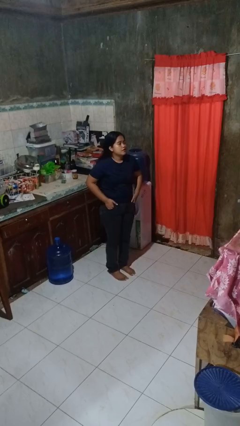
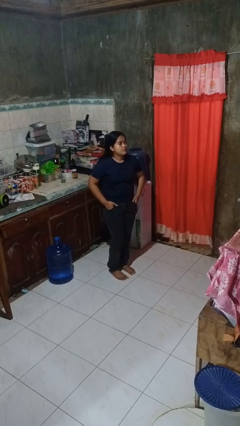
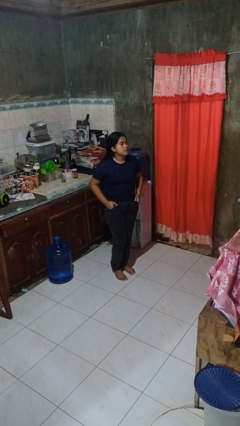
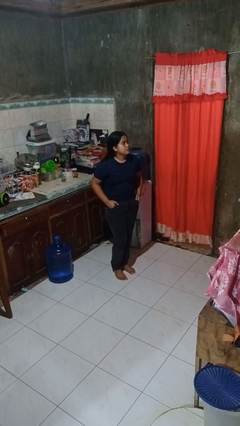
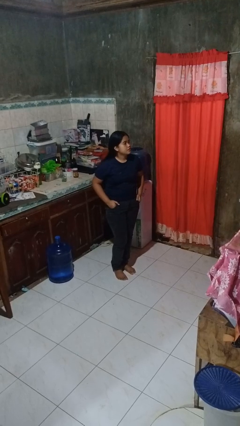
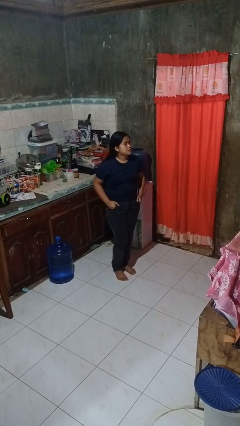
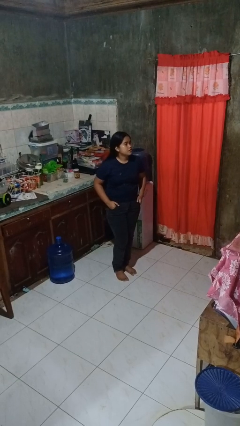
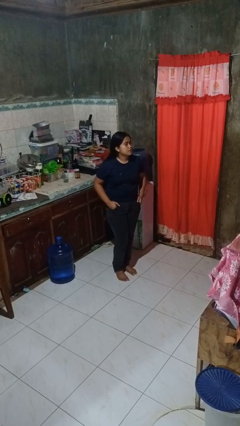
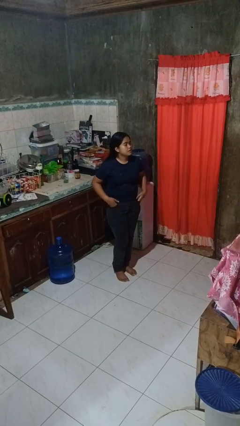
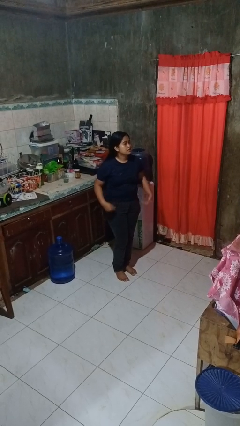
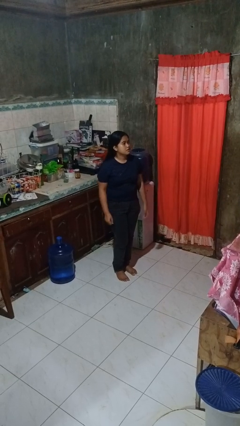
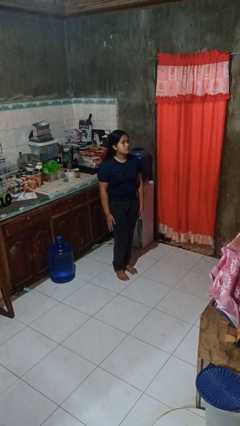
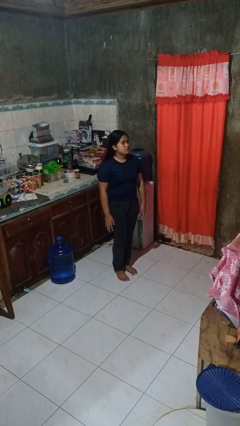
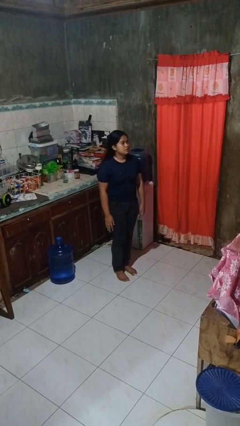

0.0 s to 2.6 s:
person puts hands in back pockets

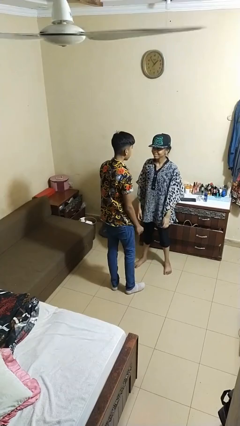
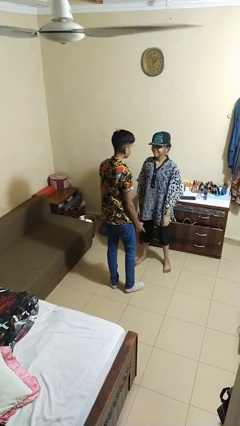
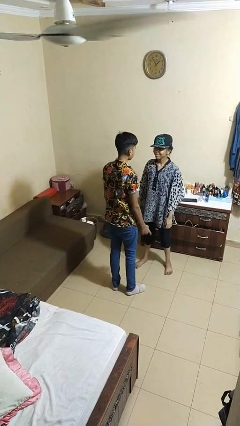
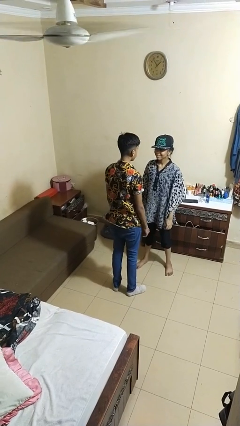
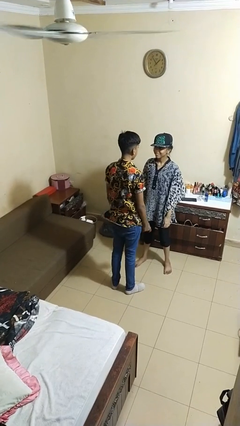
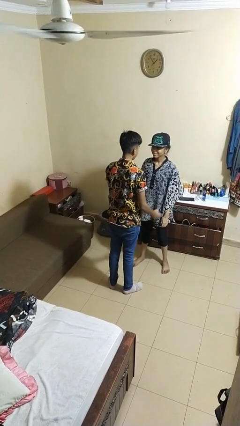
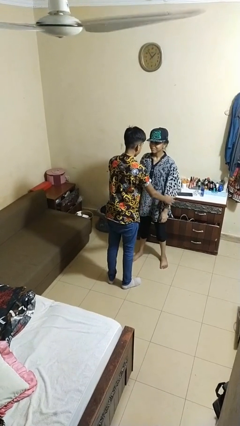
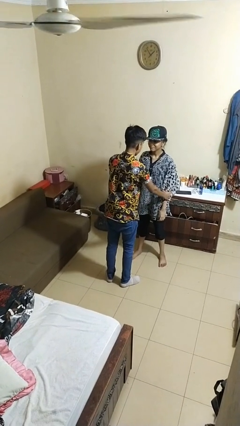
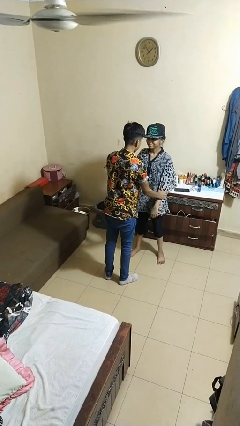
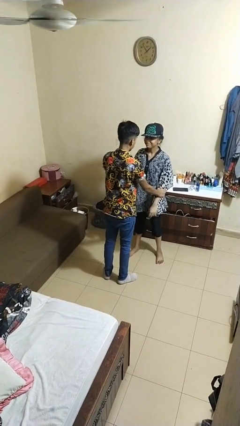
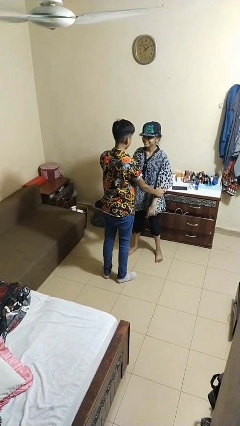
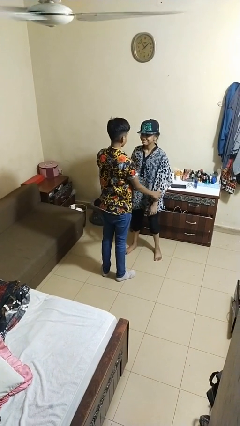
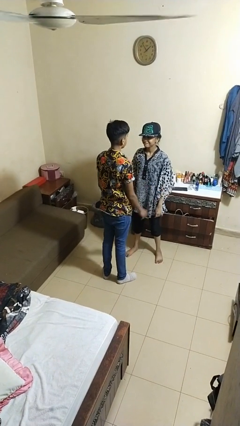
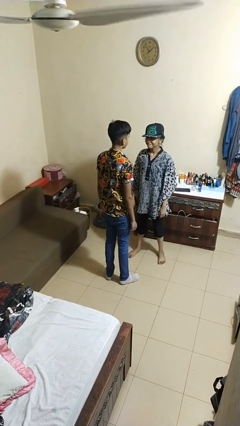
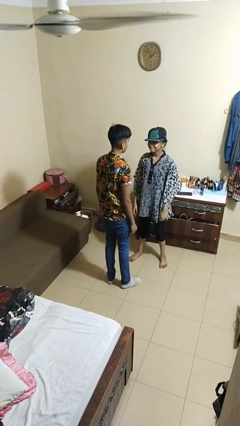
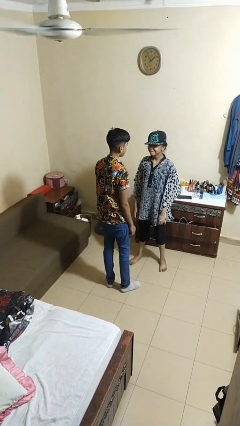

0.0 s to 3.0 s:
person grabs person by forearm

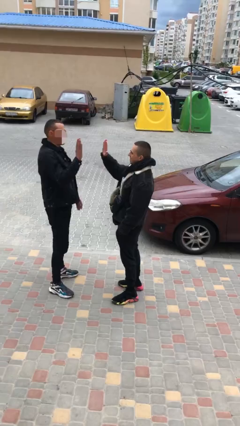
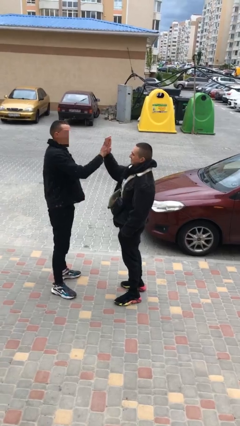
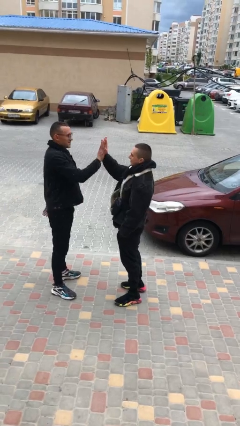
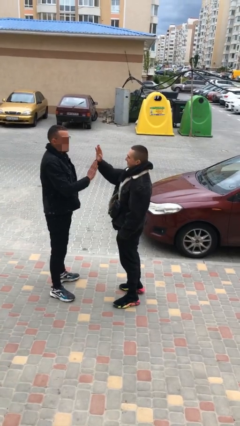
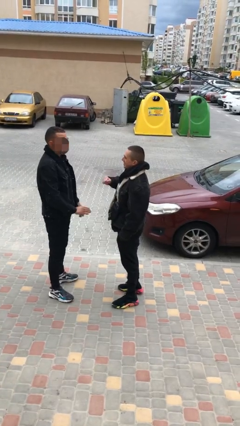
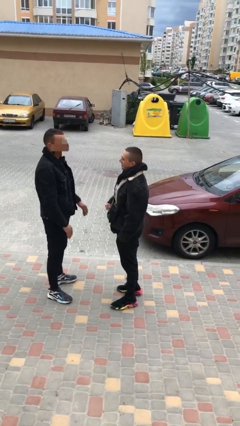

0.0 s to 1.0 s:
person highfives hand

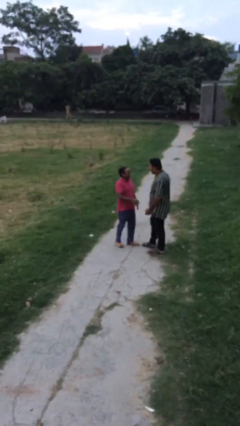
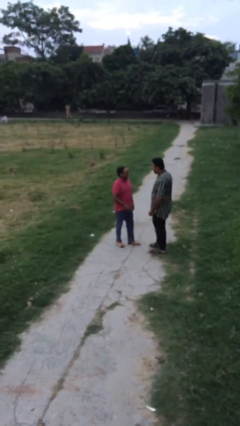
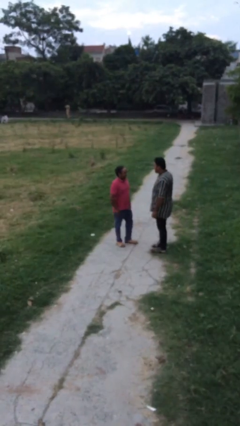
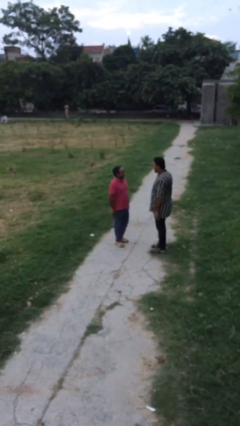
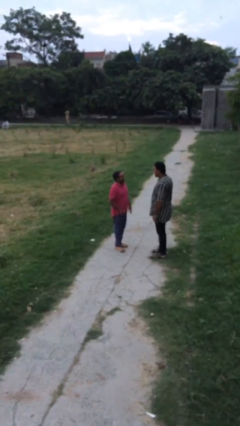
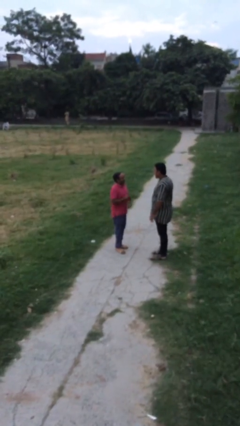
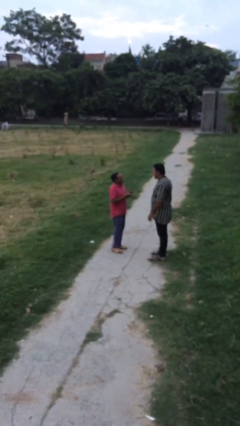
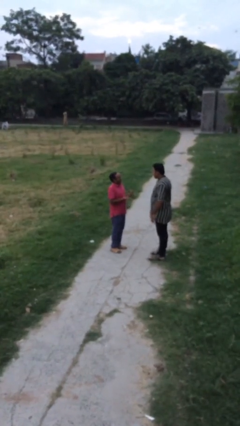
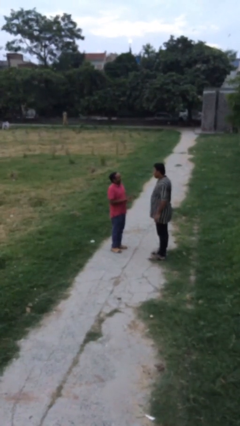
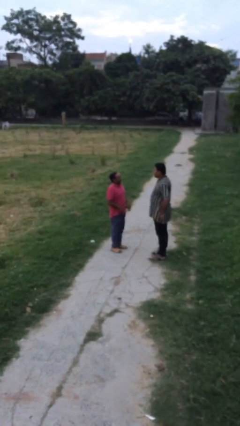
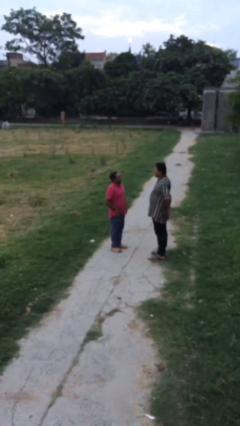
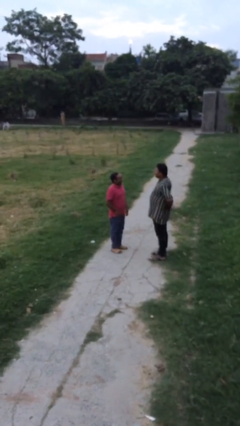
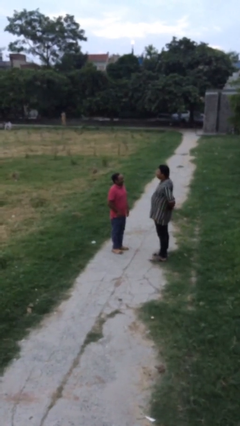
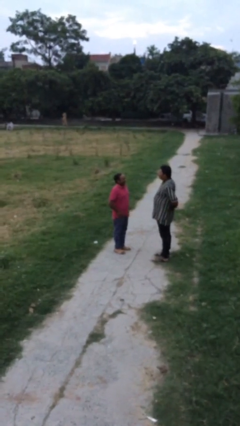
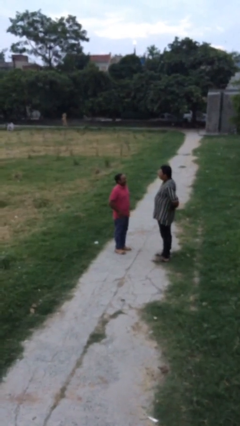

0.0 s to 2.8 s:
person talks to person

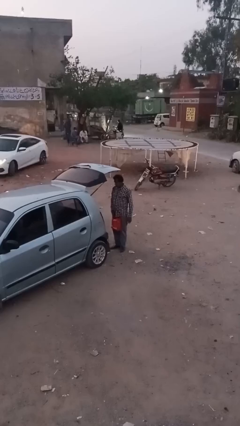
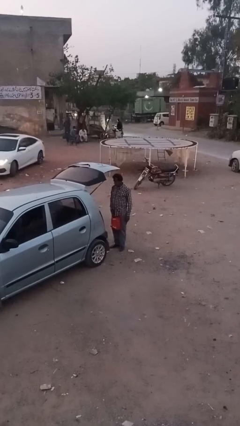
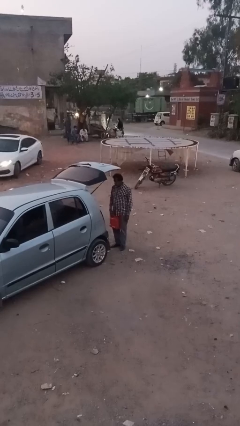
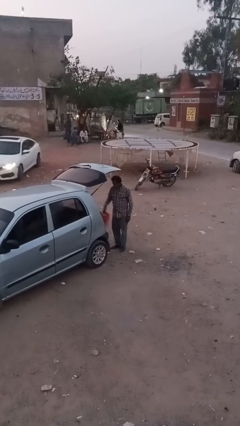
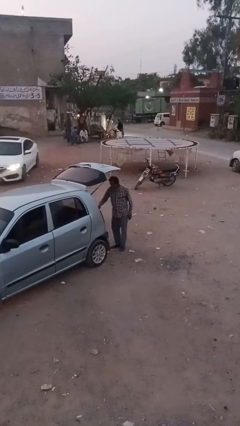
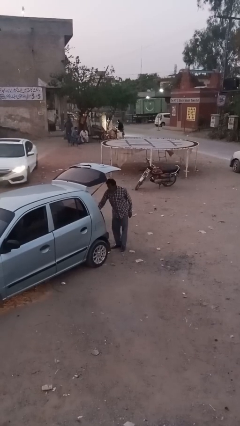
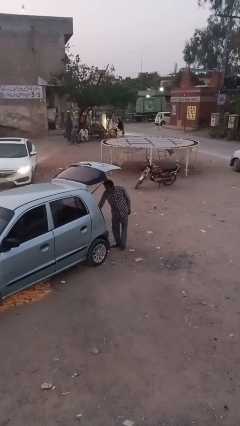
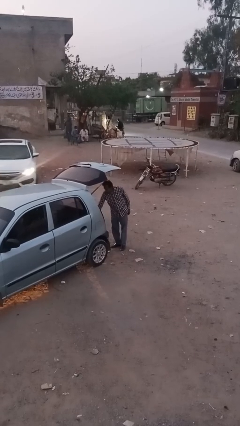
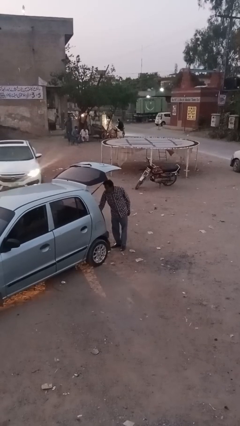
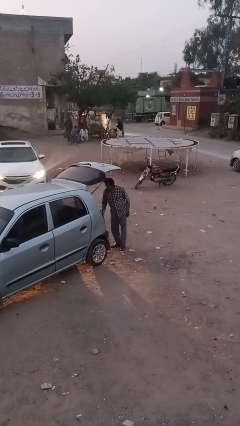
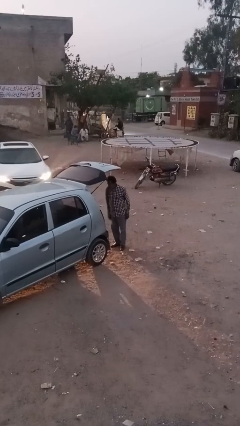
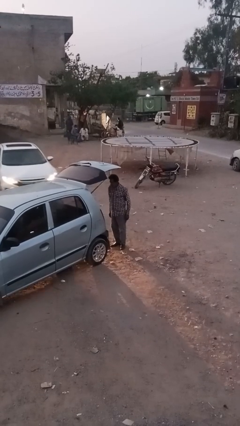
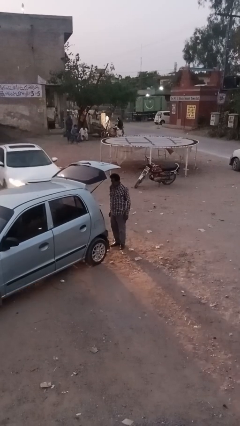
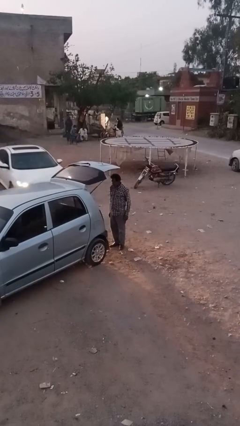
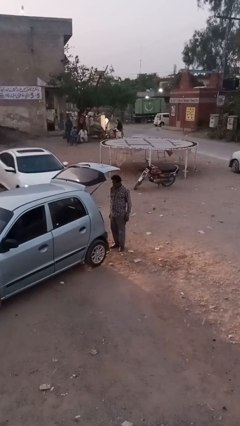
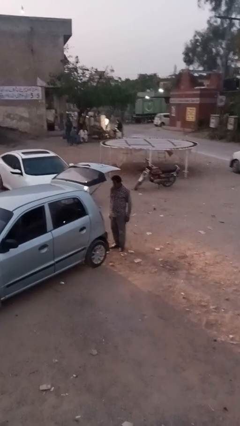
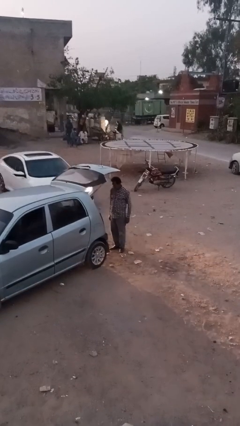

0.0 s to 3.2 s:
person loads car

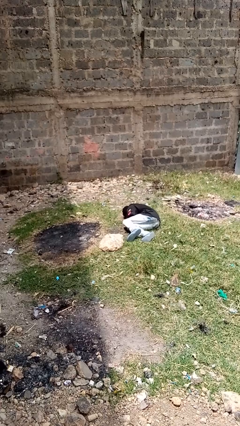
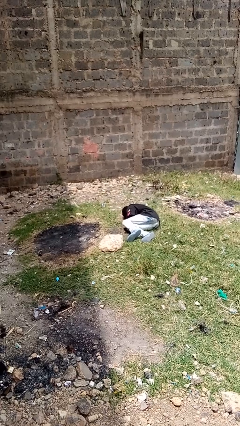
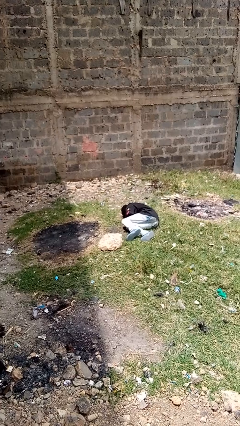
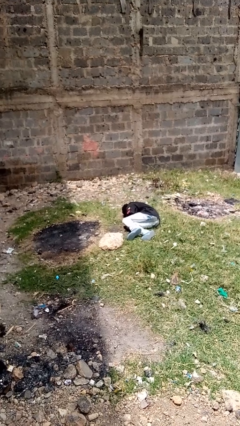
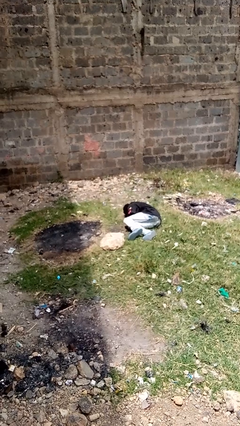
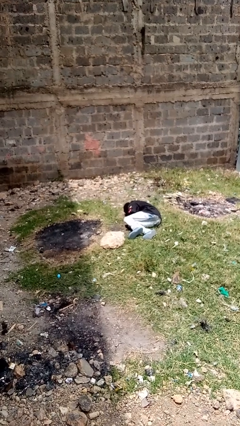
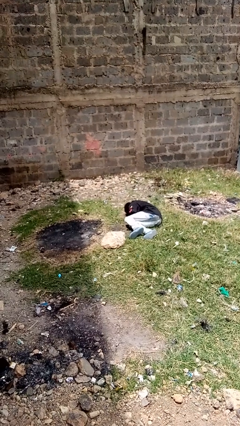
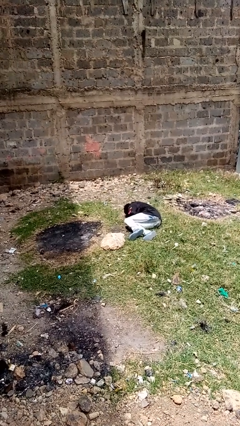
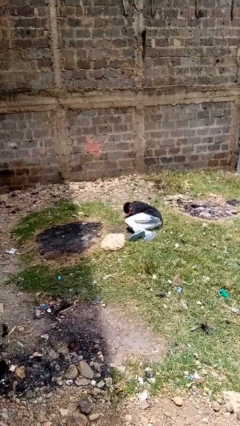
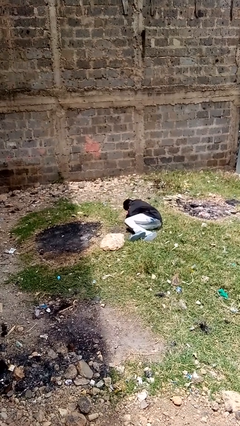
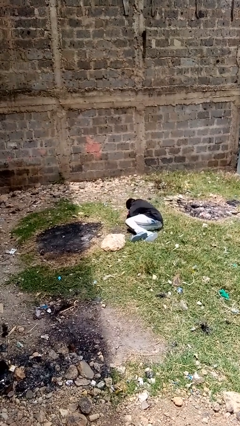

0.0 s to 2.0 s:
person lies down on floor

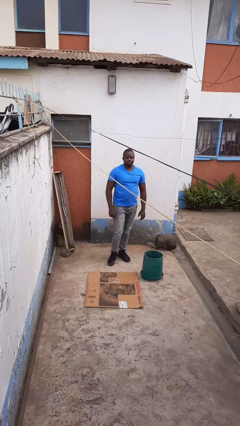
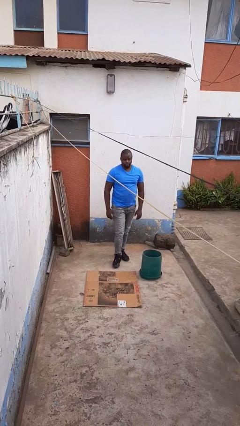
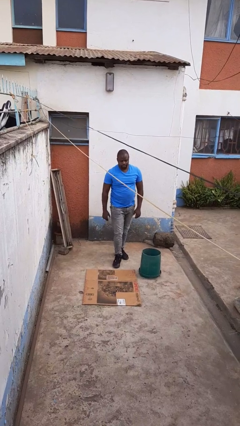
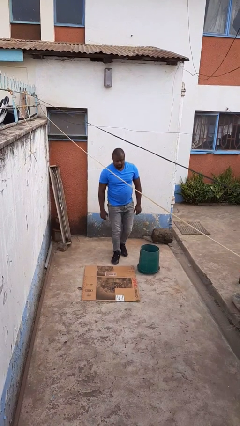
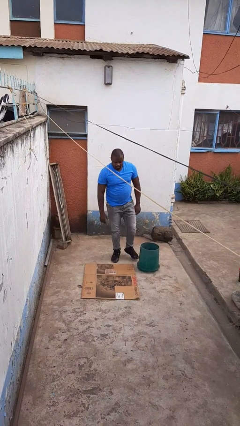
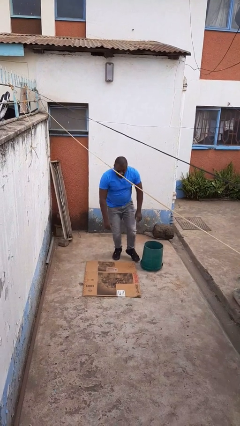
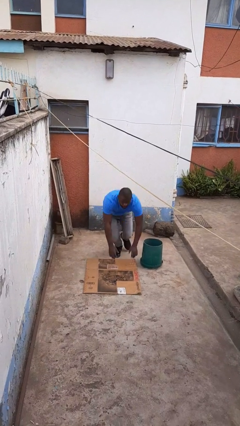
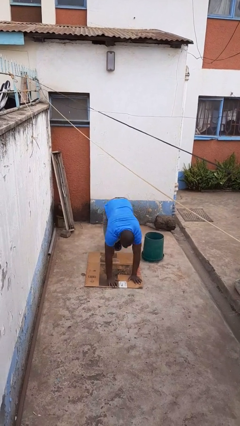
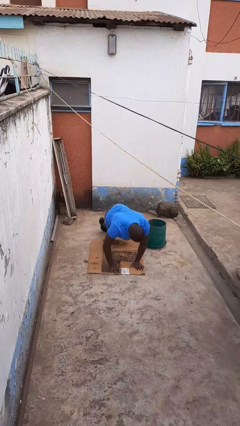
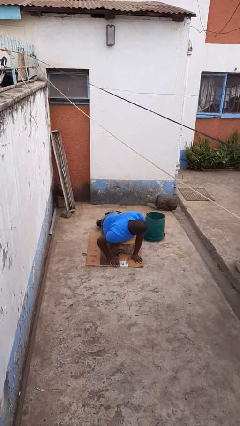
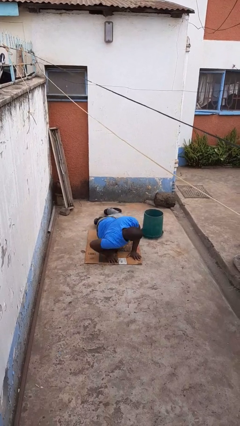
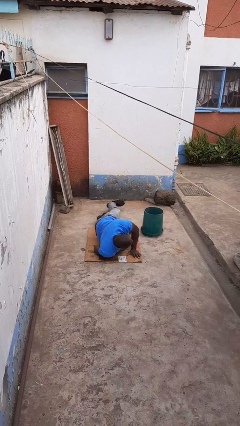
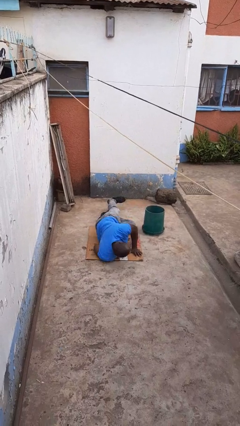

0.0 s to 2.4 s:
person trips on object on floor

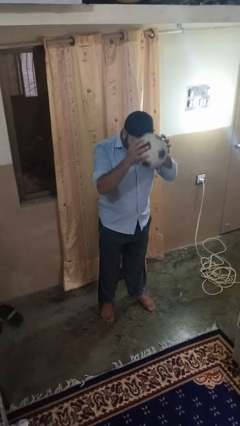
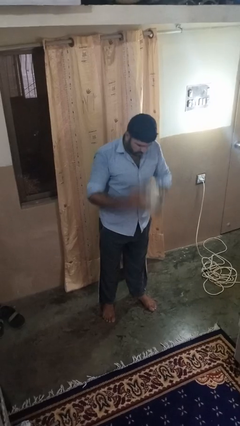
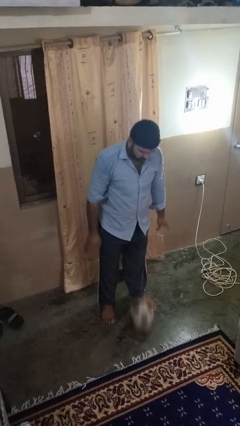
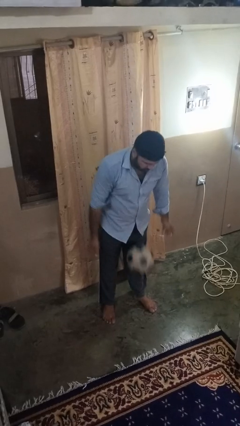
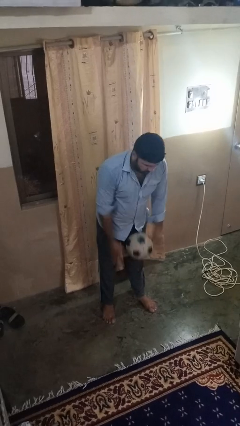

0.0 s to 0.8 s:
person bounces ball on floor
